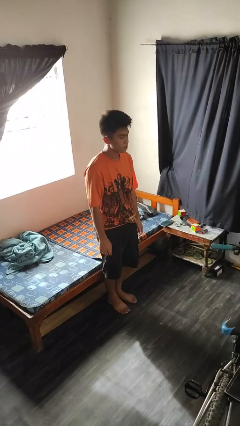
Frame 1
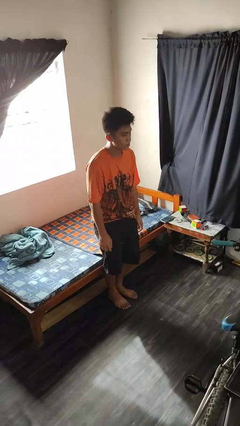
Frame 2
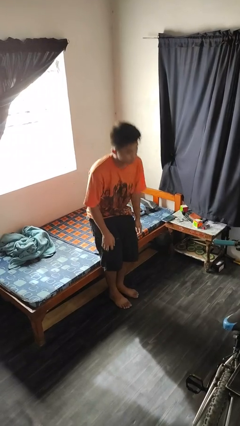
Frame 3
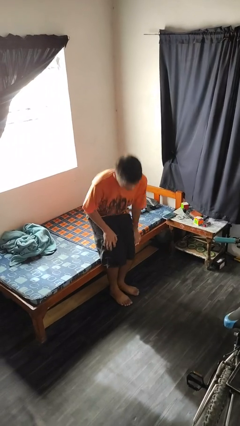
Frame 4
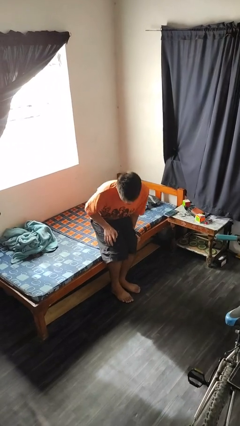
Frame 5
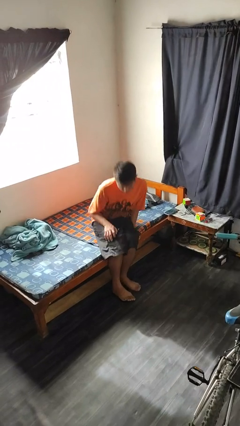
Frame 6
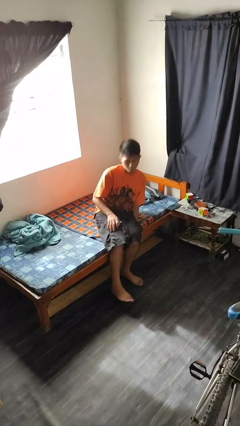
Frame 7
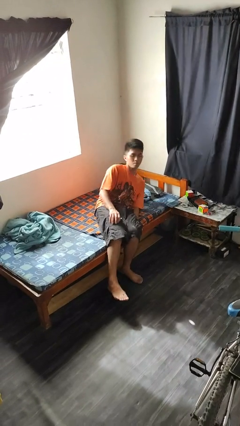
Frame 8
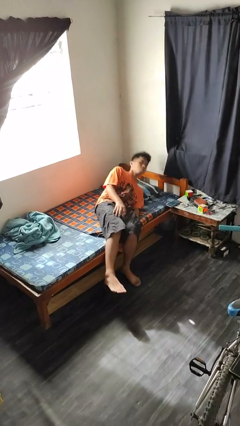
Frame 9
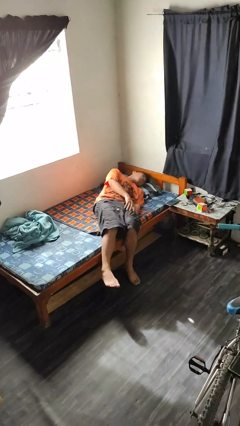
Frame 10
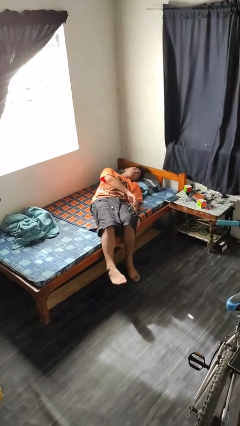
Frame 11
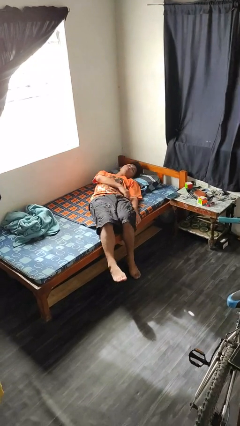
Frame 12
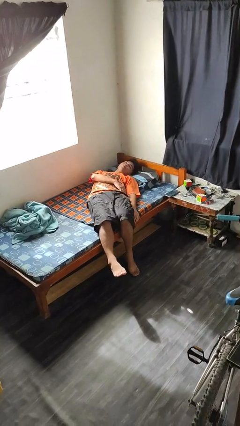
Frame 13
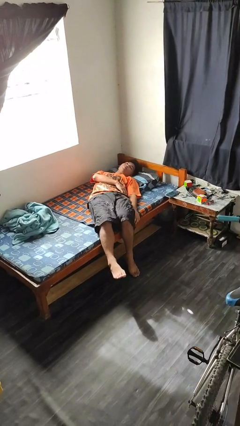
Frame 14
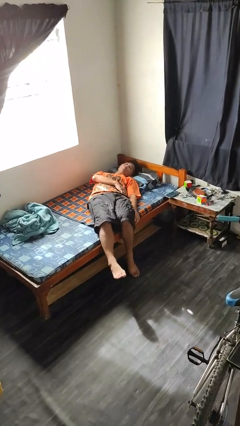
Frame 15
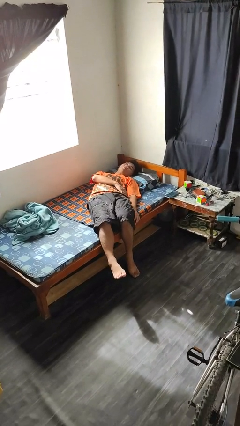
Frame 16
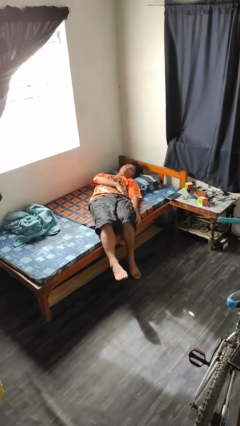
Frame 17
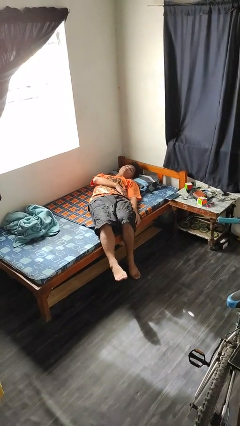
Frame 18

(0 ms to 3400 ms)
person lies down on bed

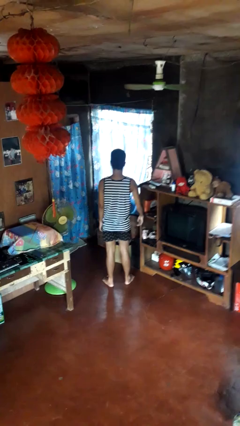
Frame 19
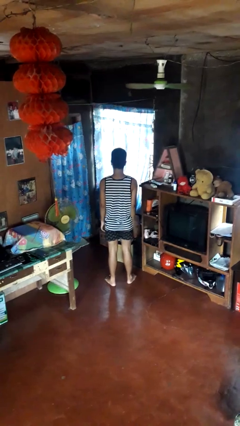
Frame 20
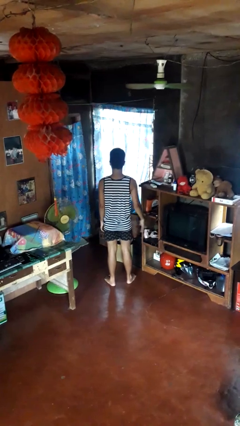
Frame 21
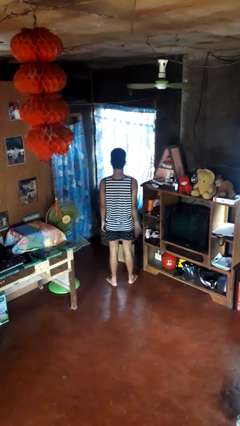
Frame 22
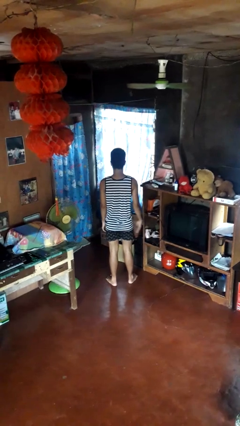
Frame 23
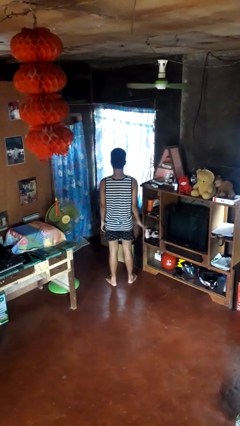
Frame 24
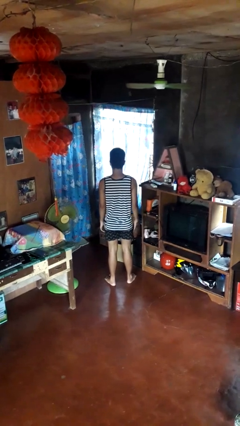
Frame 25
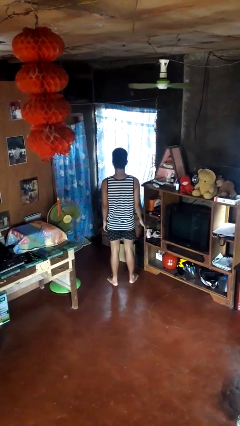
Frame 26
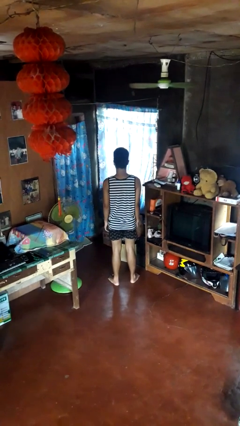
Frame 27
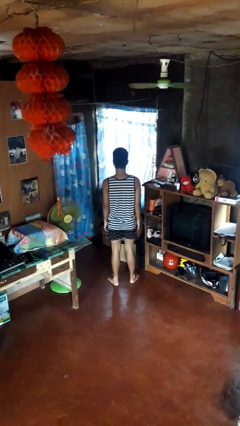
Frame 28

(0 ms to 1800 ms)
person slaps hands on thighs

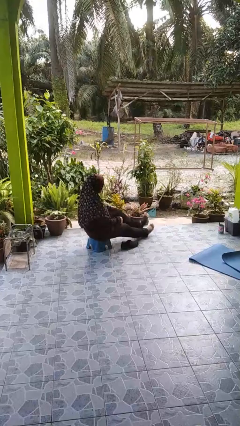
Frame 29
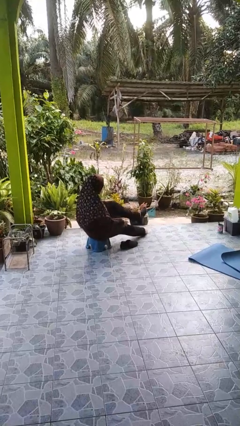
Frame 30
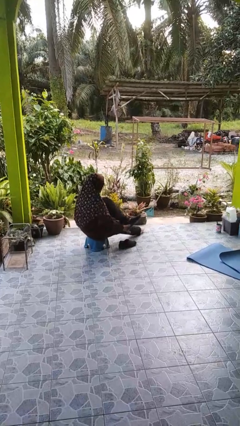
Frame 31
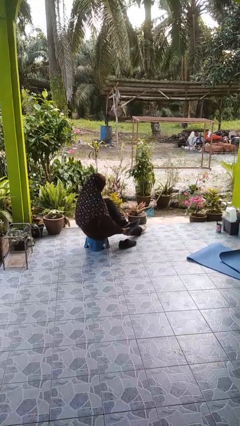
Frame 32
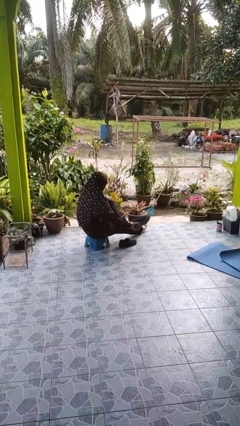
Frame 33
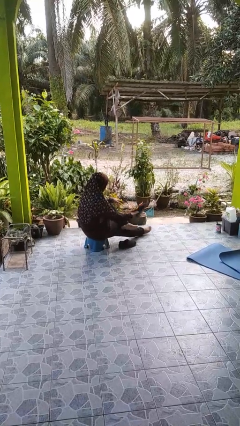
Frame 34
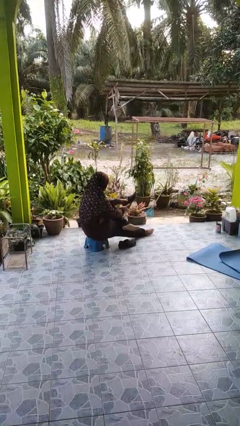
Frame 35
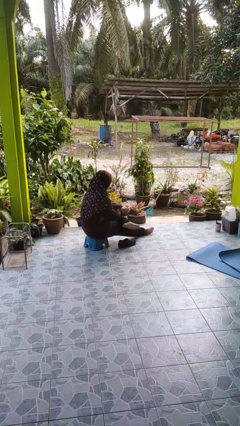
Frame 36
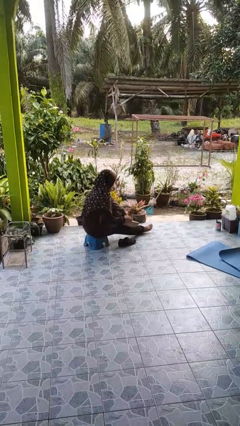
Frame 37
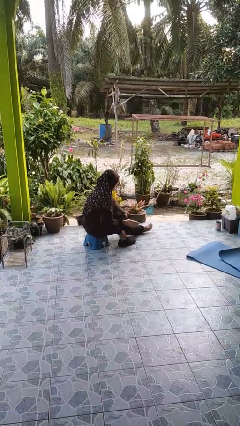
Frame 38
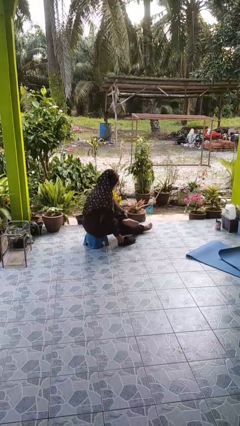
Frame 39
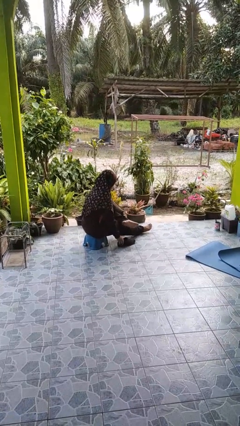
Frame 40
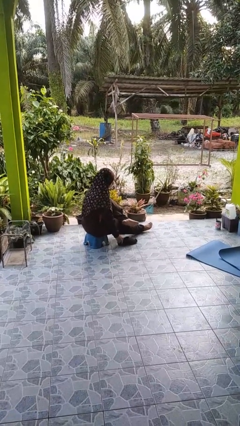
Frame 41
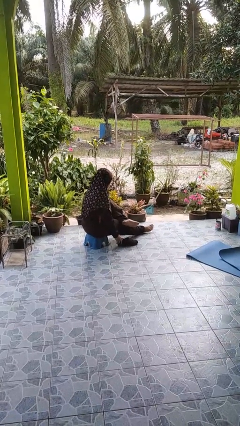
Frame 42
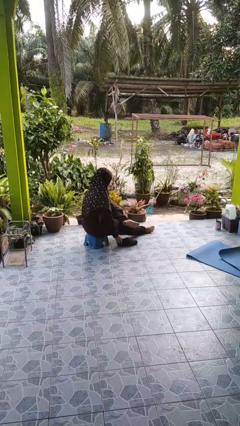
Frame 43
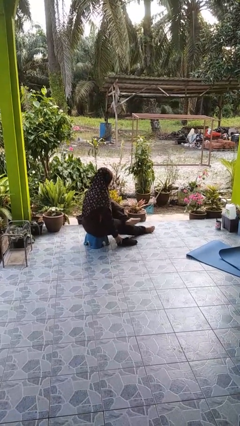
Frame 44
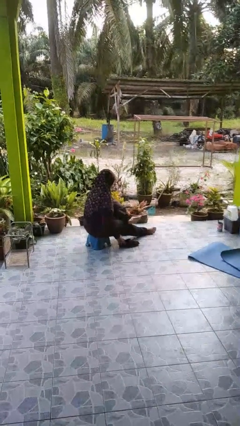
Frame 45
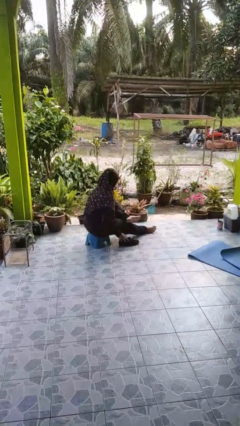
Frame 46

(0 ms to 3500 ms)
person takes off shoes

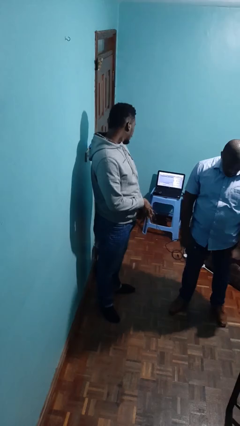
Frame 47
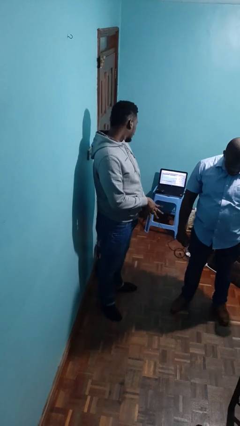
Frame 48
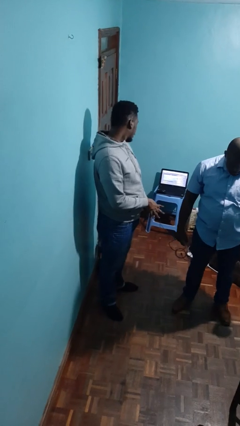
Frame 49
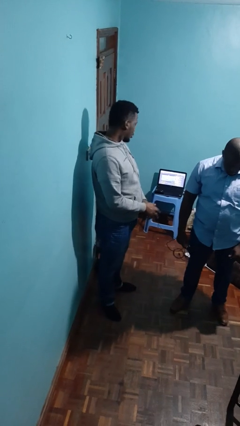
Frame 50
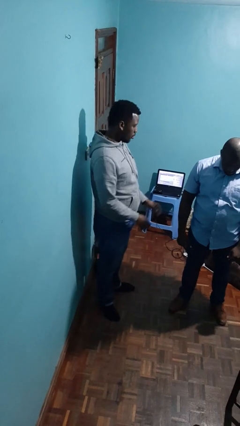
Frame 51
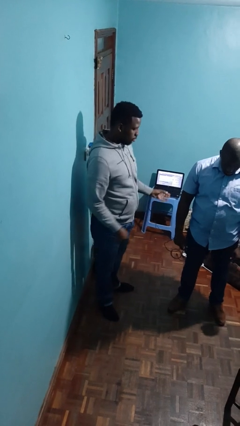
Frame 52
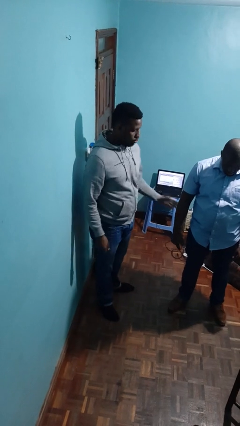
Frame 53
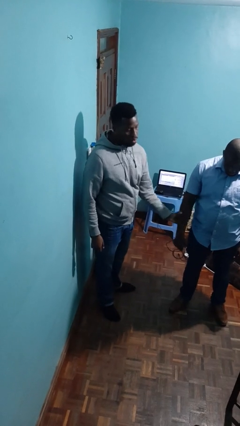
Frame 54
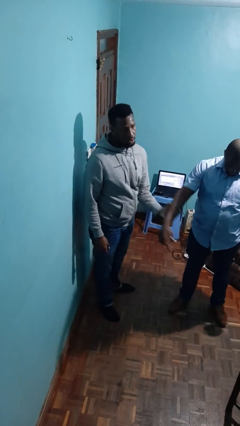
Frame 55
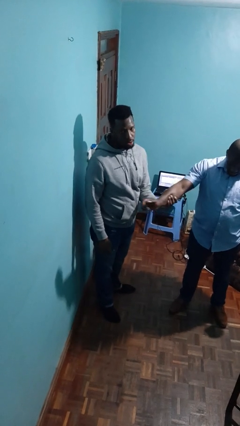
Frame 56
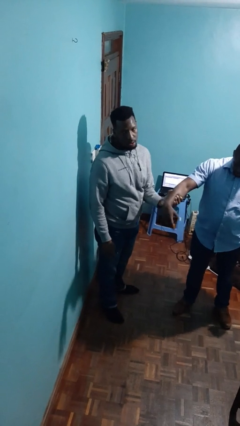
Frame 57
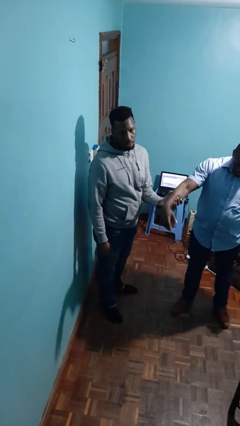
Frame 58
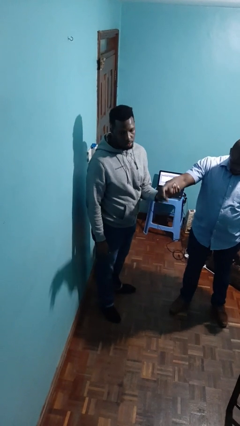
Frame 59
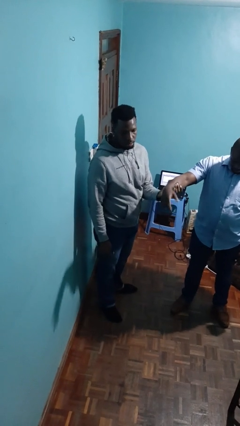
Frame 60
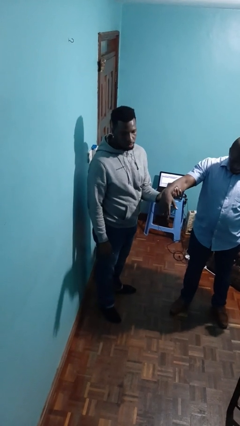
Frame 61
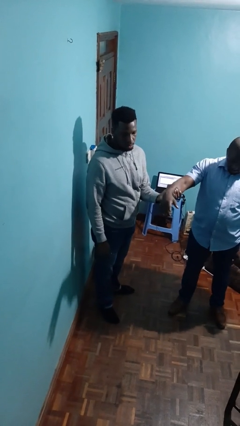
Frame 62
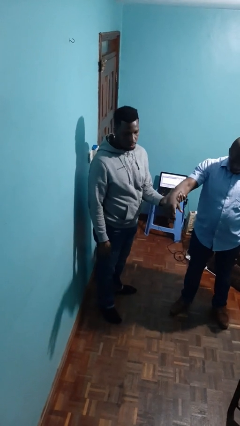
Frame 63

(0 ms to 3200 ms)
person grabs person by forearm

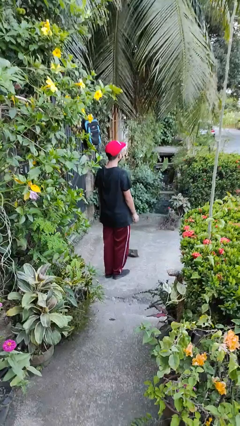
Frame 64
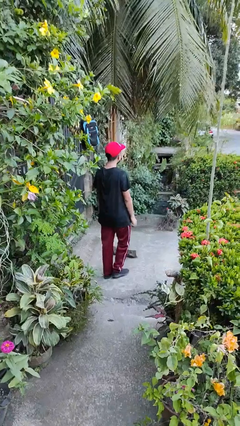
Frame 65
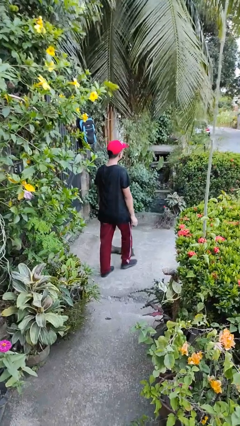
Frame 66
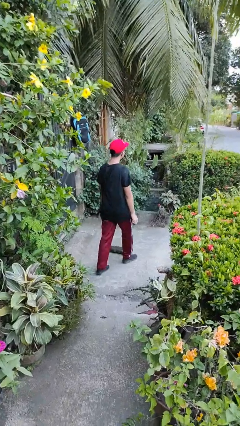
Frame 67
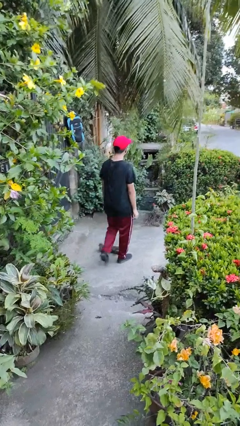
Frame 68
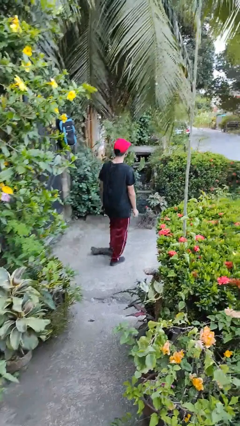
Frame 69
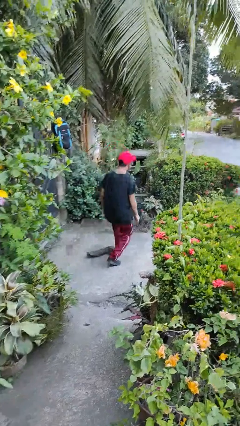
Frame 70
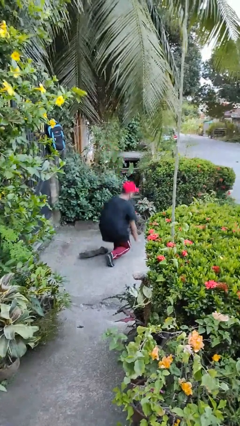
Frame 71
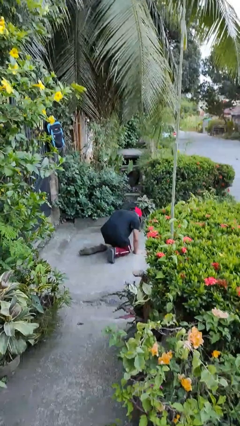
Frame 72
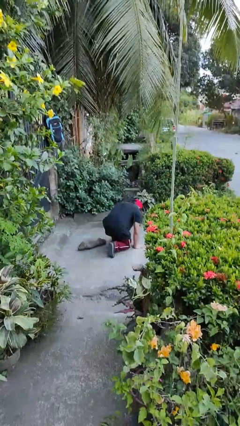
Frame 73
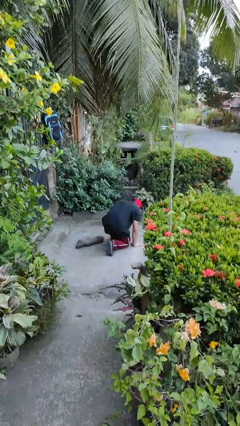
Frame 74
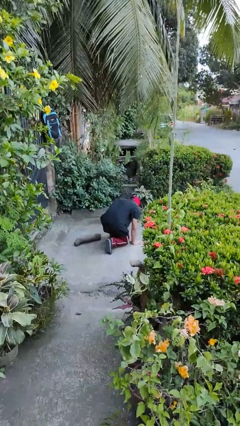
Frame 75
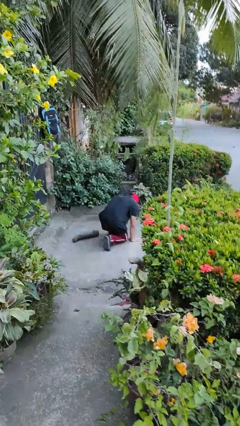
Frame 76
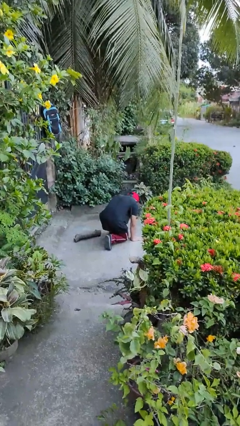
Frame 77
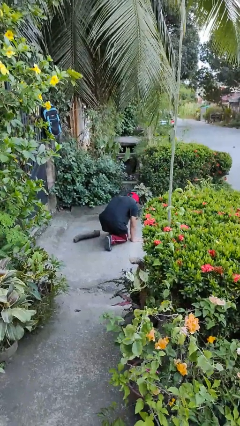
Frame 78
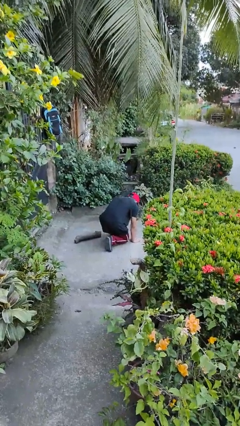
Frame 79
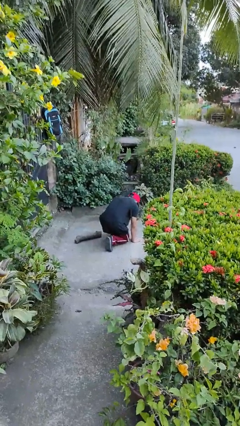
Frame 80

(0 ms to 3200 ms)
person trips on object on floor

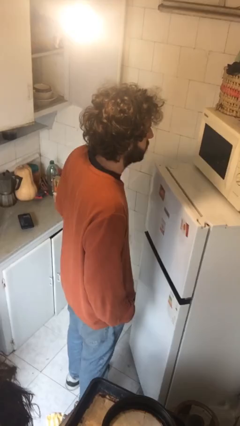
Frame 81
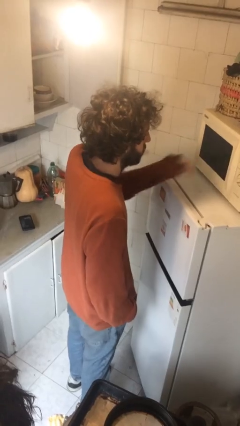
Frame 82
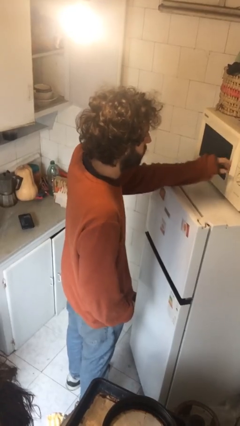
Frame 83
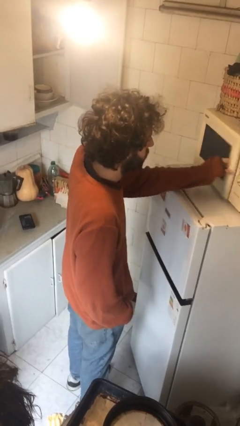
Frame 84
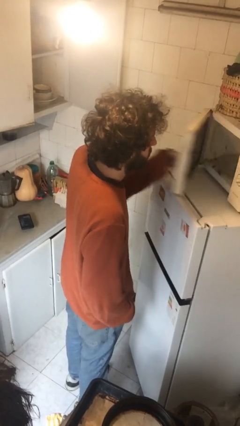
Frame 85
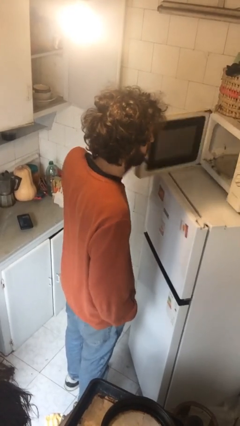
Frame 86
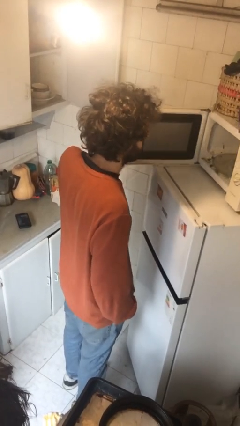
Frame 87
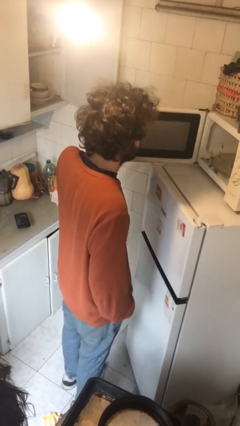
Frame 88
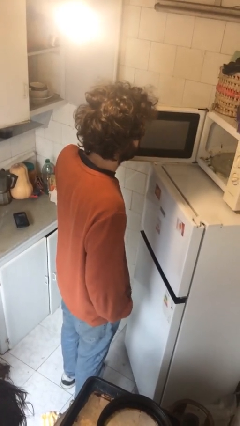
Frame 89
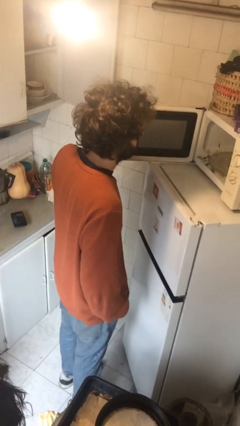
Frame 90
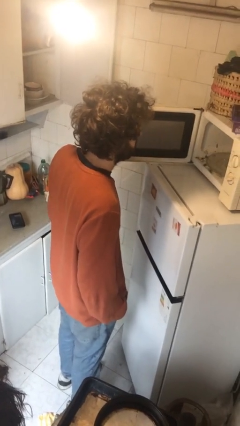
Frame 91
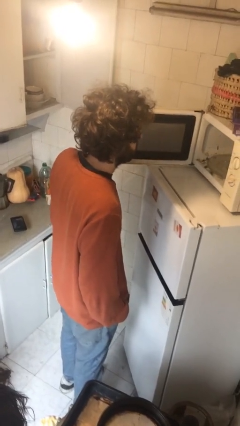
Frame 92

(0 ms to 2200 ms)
person opens microwave
